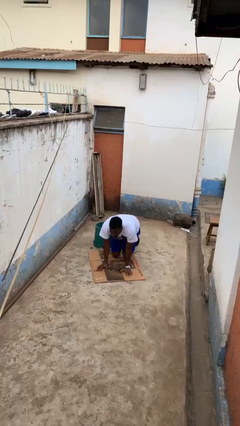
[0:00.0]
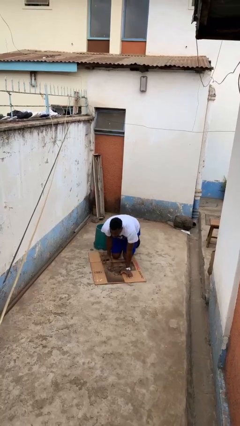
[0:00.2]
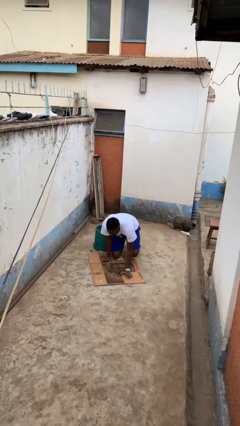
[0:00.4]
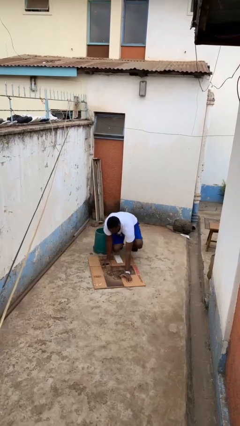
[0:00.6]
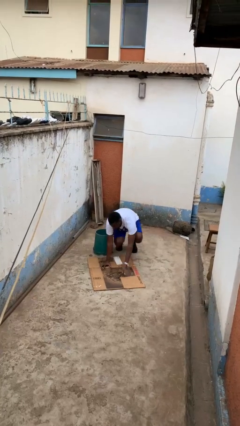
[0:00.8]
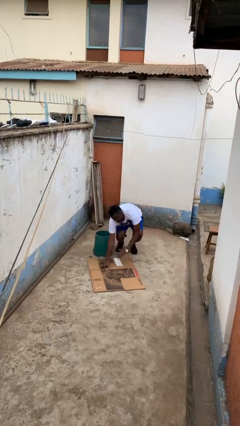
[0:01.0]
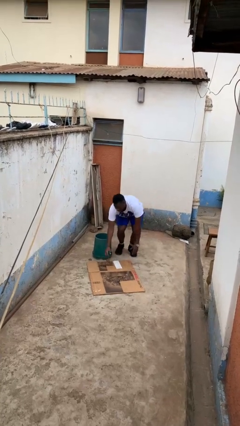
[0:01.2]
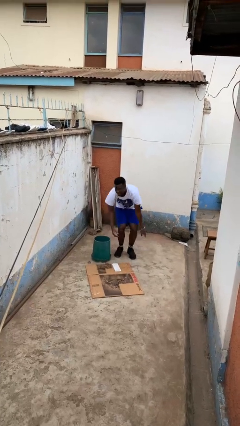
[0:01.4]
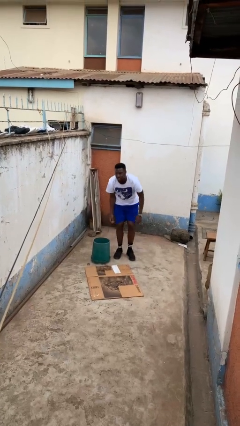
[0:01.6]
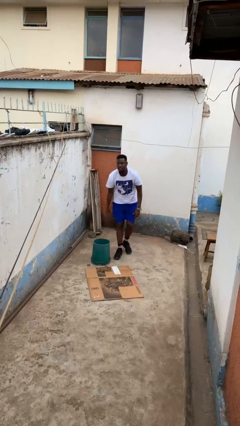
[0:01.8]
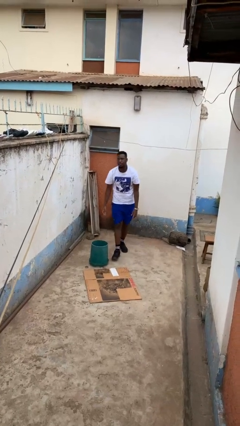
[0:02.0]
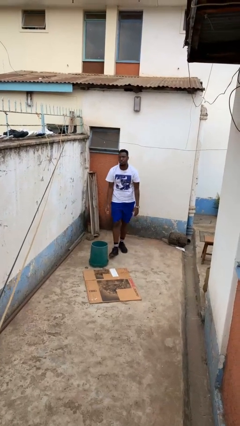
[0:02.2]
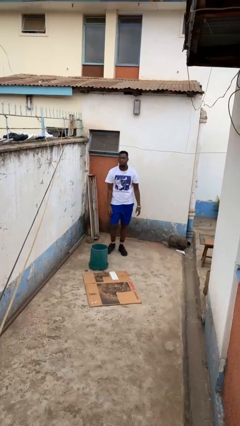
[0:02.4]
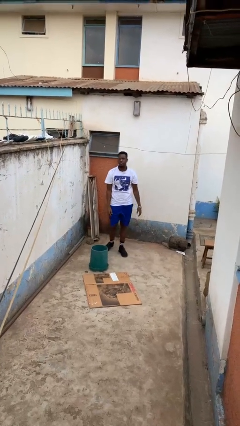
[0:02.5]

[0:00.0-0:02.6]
person stands up from floor

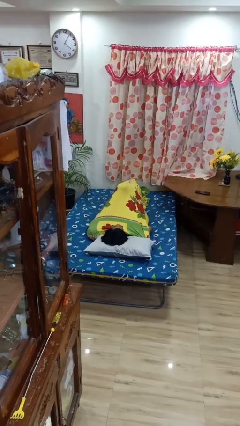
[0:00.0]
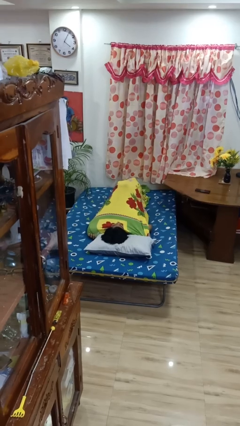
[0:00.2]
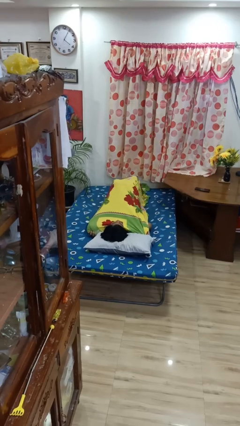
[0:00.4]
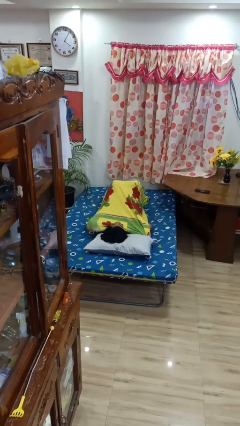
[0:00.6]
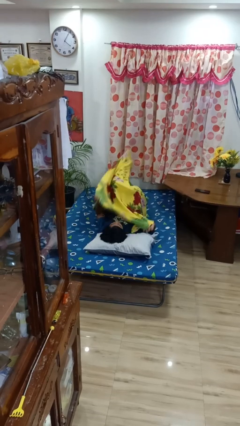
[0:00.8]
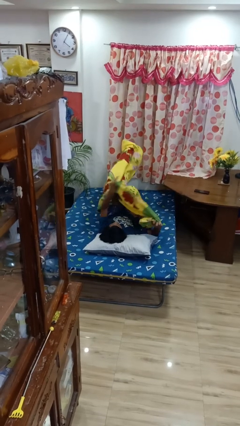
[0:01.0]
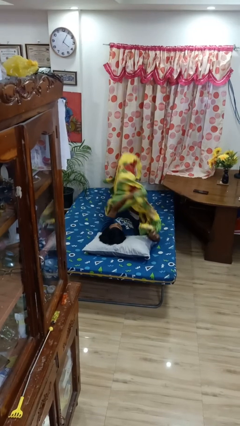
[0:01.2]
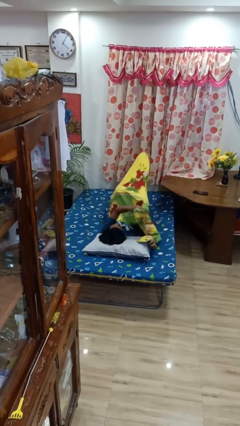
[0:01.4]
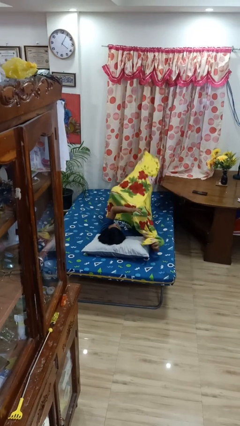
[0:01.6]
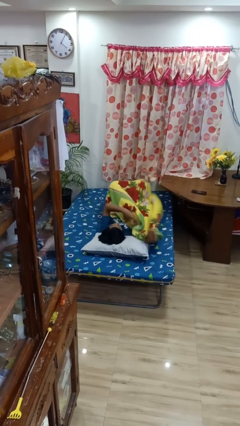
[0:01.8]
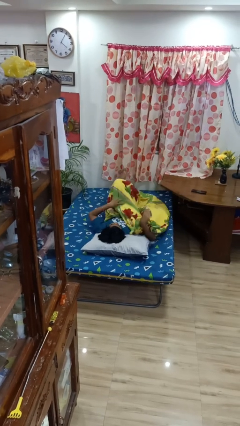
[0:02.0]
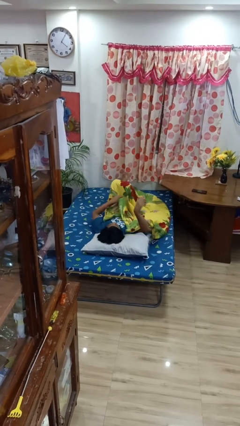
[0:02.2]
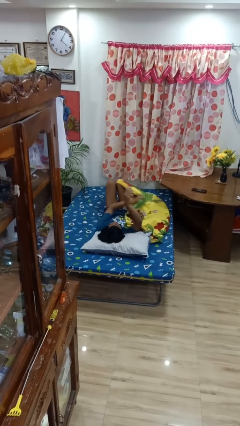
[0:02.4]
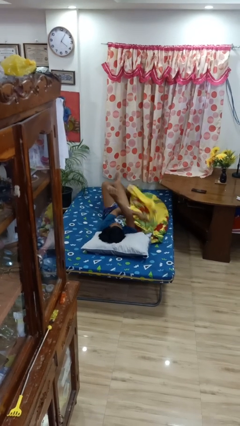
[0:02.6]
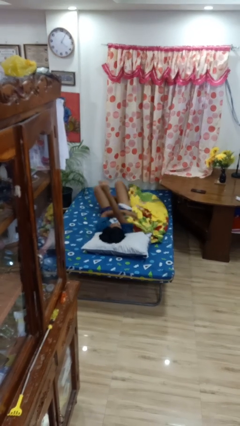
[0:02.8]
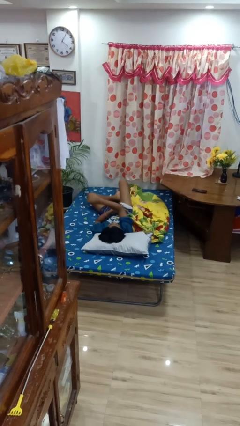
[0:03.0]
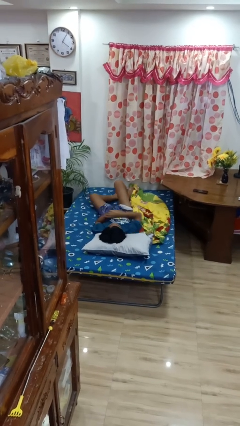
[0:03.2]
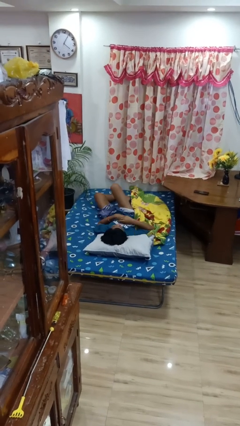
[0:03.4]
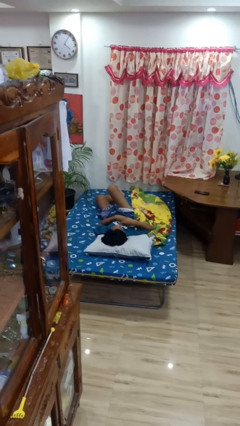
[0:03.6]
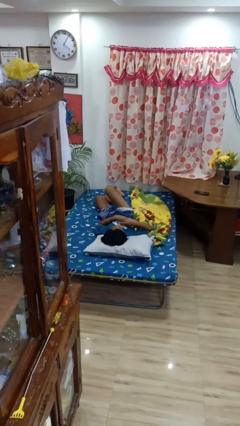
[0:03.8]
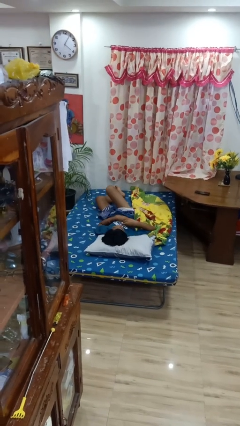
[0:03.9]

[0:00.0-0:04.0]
person uncovers with bedsheets

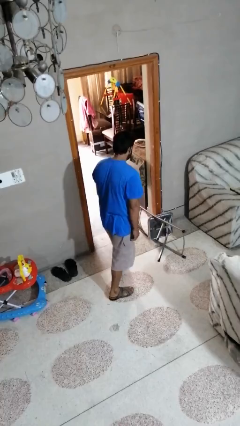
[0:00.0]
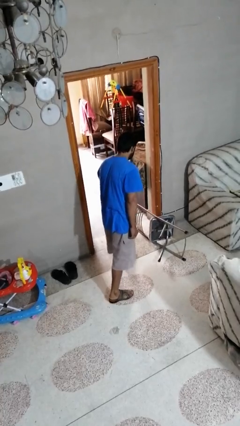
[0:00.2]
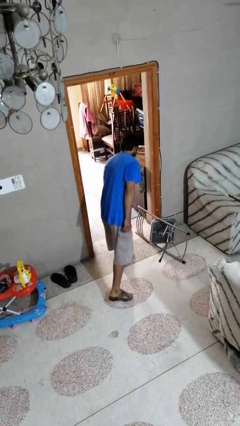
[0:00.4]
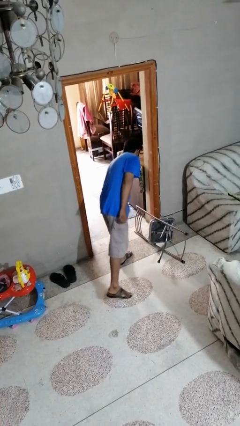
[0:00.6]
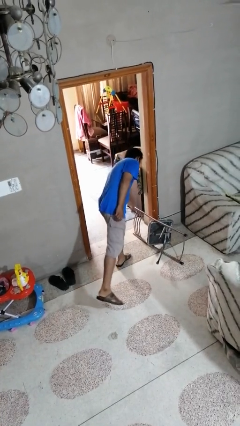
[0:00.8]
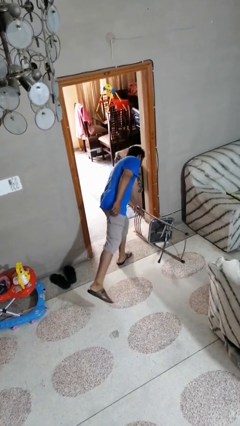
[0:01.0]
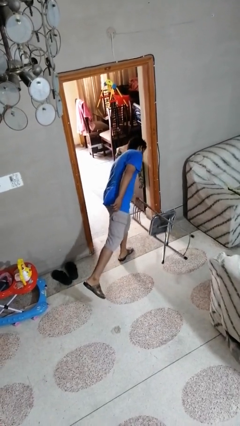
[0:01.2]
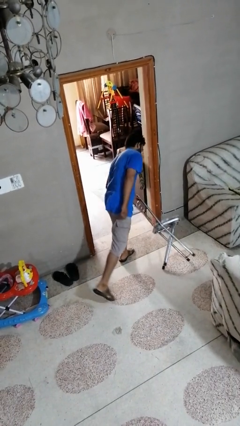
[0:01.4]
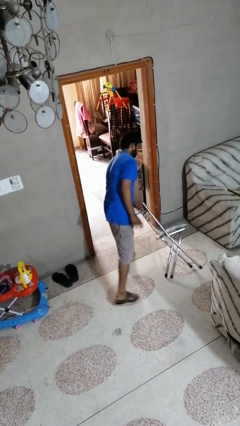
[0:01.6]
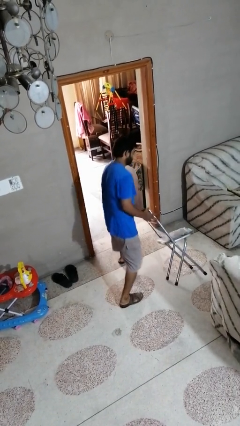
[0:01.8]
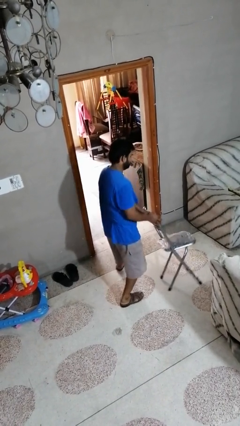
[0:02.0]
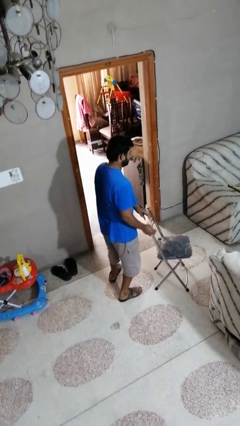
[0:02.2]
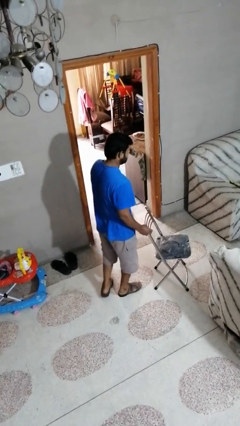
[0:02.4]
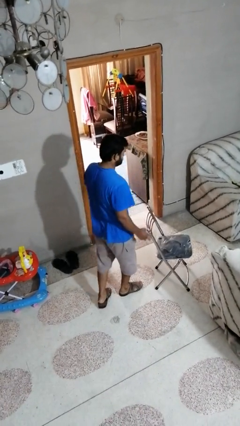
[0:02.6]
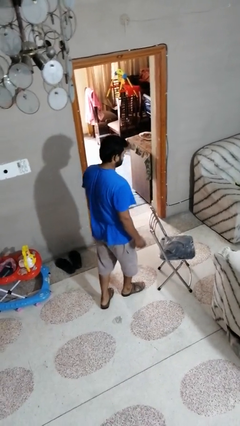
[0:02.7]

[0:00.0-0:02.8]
person sets upright furniture

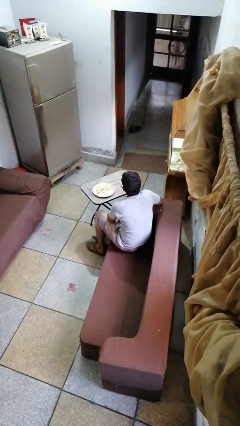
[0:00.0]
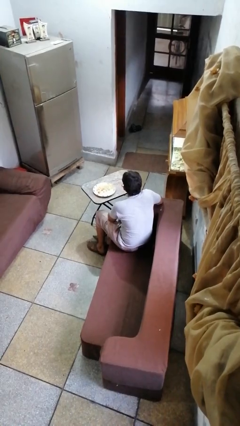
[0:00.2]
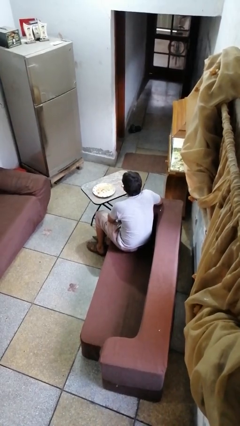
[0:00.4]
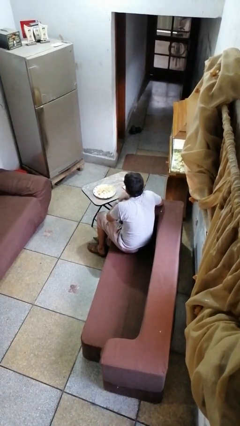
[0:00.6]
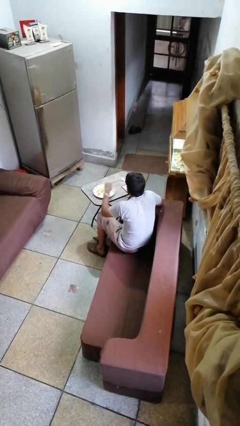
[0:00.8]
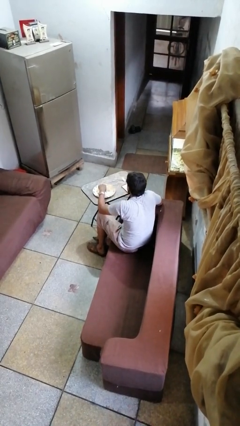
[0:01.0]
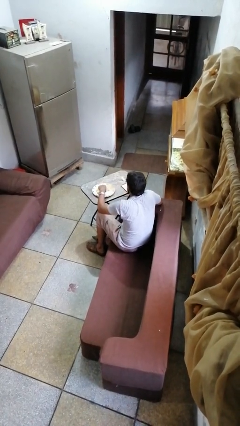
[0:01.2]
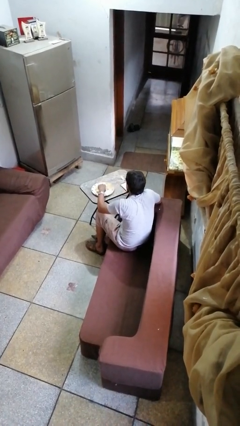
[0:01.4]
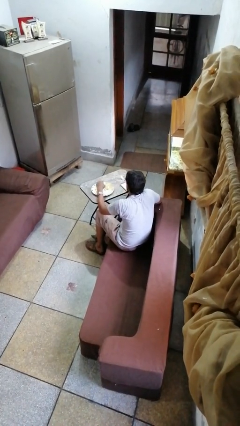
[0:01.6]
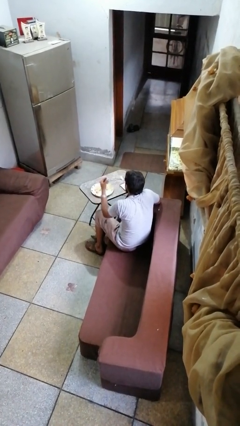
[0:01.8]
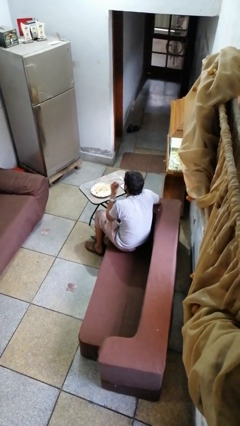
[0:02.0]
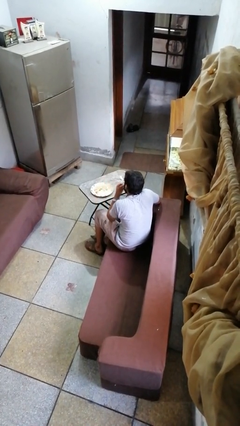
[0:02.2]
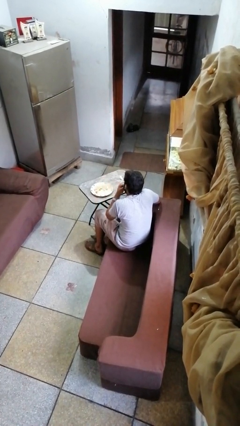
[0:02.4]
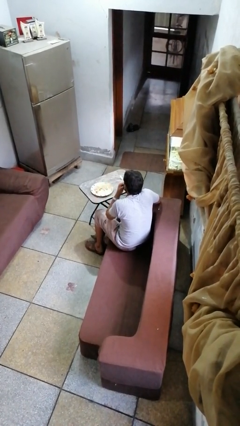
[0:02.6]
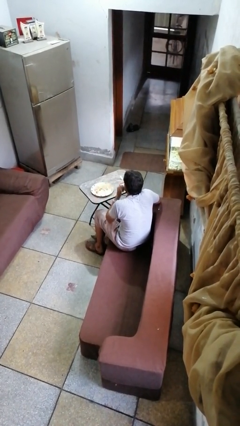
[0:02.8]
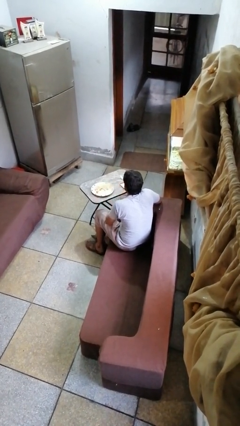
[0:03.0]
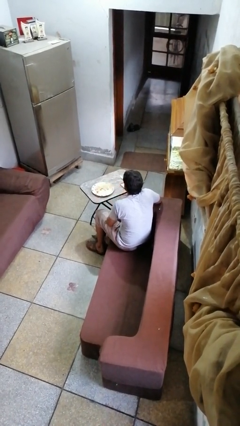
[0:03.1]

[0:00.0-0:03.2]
person eats with hands

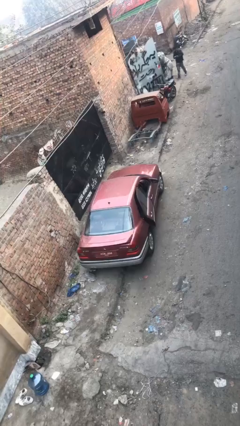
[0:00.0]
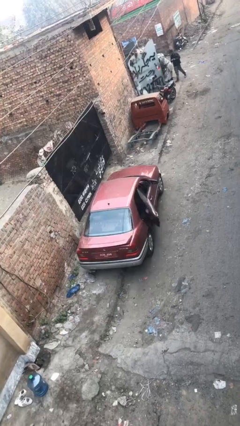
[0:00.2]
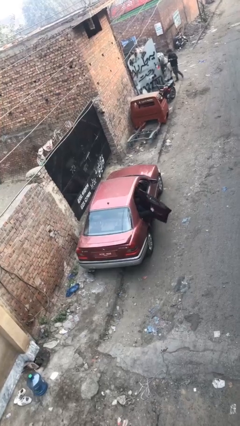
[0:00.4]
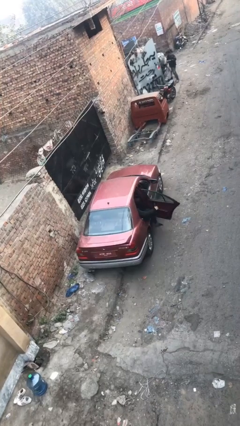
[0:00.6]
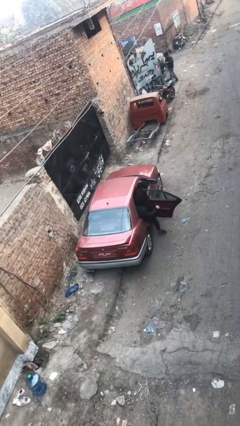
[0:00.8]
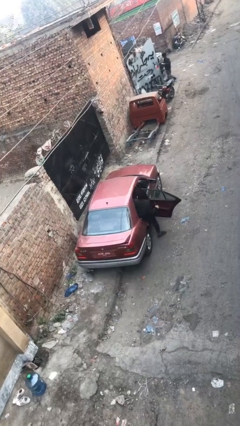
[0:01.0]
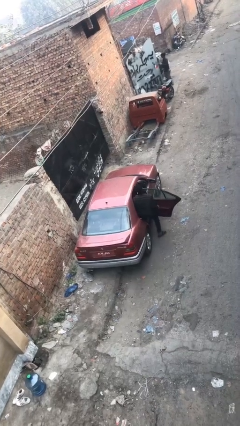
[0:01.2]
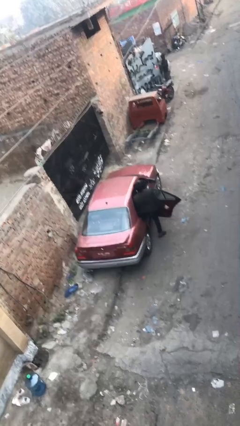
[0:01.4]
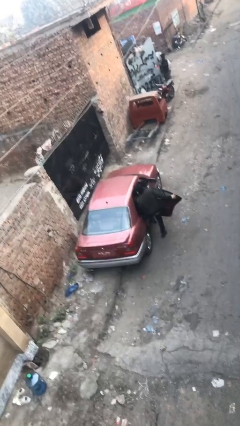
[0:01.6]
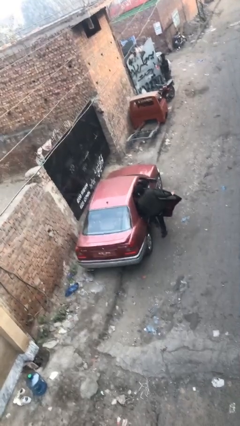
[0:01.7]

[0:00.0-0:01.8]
car drops off person

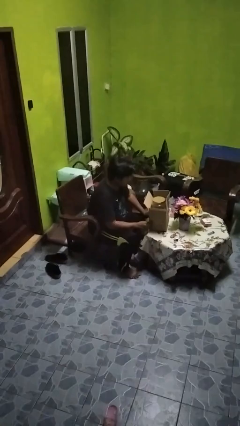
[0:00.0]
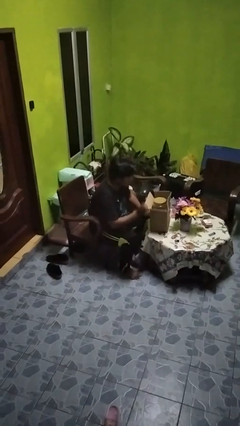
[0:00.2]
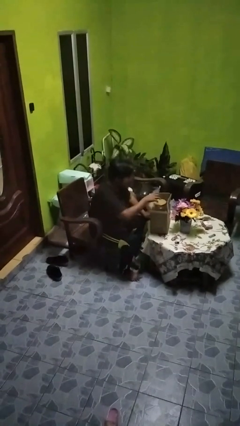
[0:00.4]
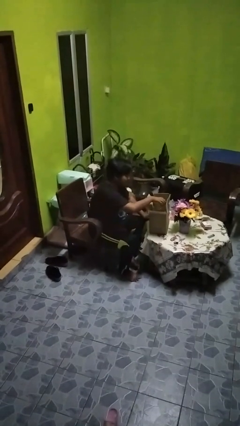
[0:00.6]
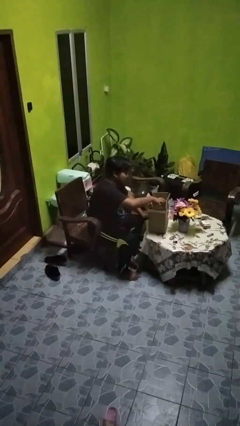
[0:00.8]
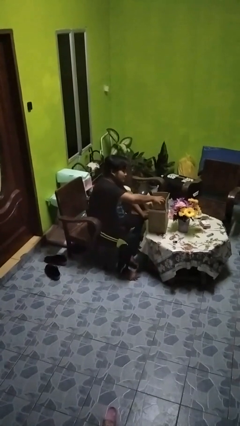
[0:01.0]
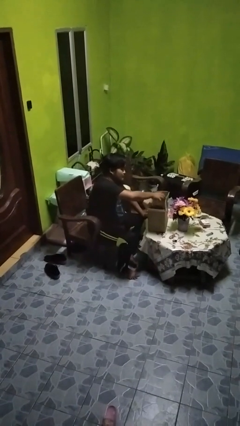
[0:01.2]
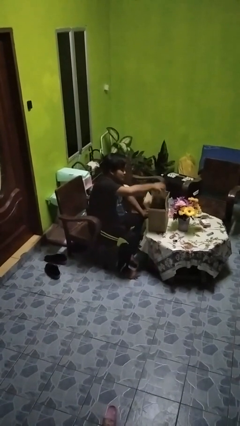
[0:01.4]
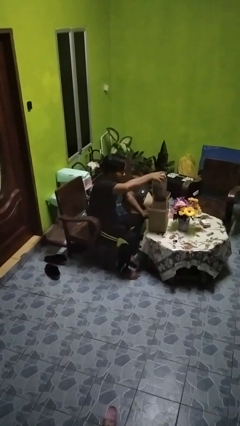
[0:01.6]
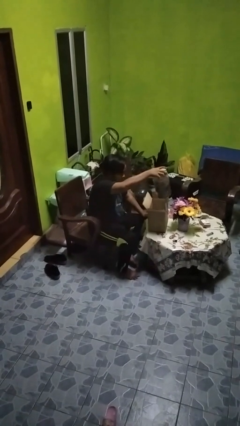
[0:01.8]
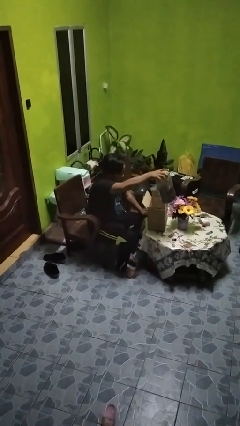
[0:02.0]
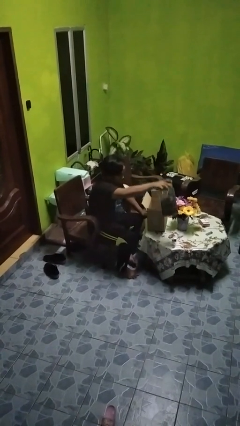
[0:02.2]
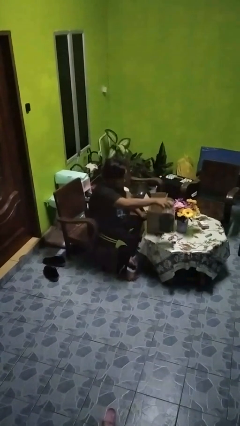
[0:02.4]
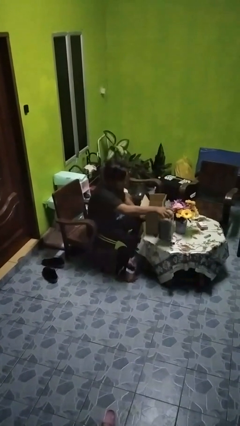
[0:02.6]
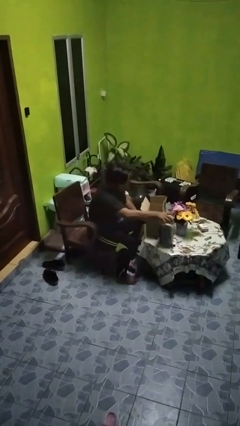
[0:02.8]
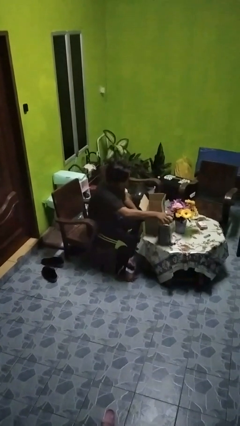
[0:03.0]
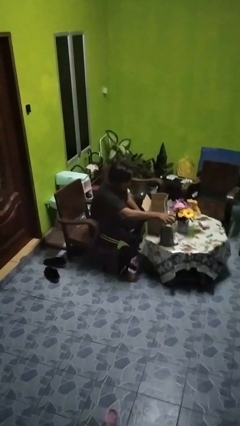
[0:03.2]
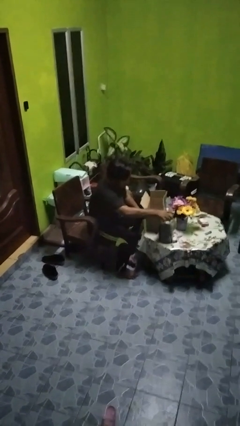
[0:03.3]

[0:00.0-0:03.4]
person takes object from box
